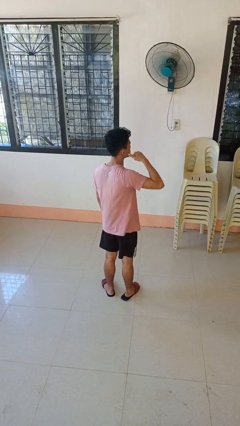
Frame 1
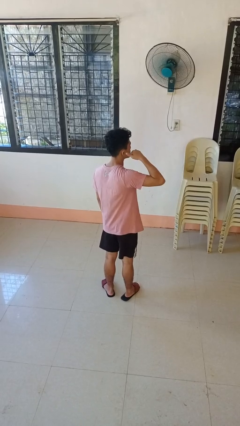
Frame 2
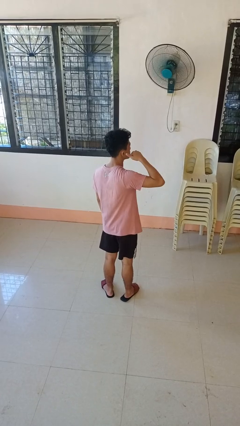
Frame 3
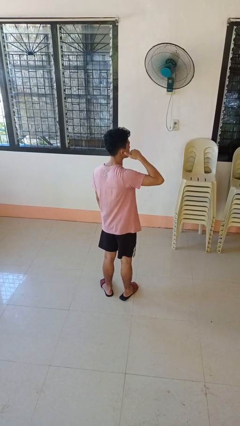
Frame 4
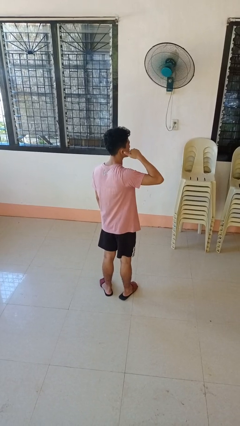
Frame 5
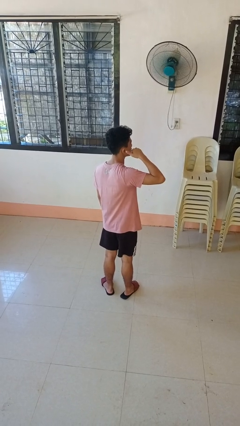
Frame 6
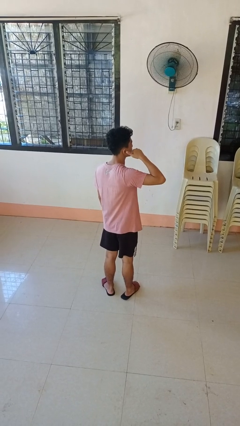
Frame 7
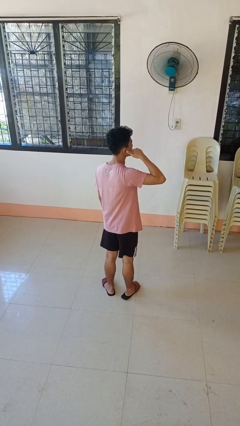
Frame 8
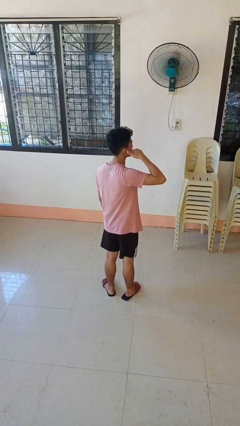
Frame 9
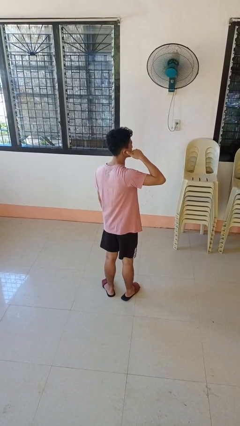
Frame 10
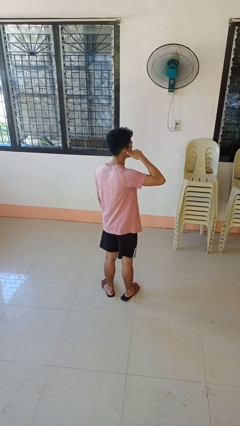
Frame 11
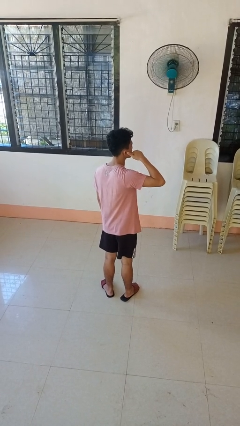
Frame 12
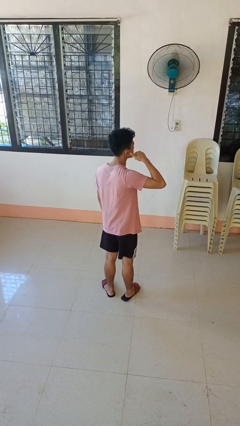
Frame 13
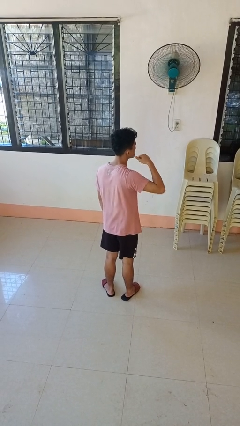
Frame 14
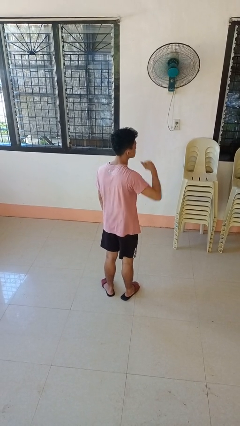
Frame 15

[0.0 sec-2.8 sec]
person gestures call me

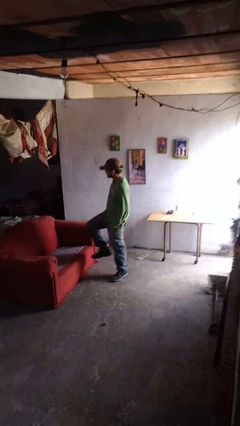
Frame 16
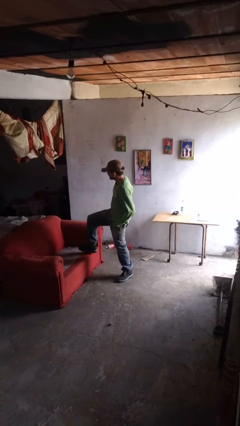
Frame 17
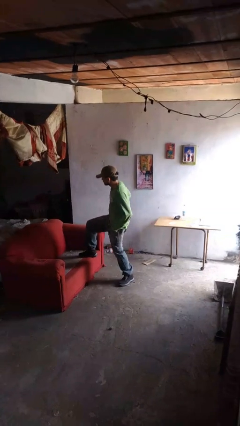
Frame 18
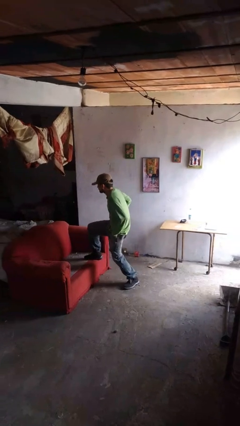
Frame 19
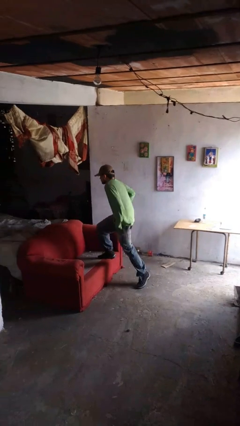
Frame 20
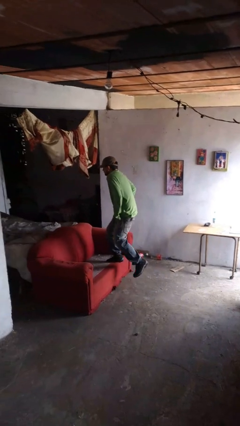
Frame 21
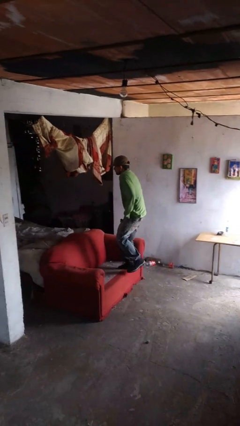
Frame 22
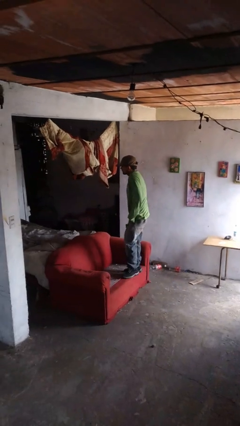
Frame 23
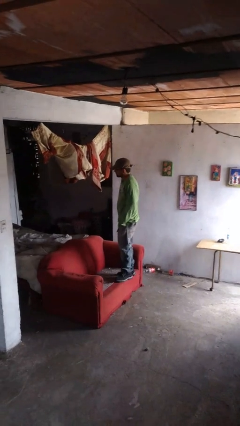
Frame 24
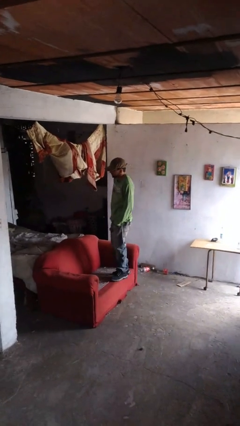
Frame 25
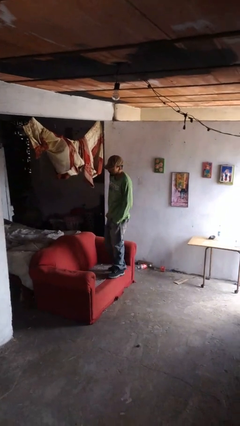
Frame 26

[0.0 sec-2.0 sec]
person climbs on couch

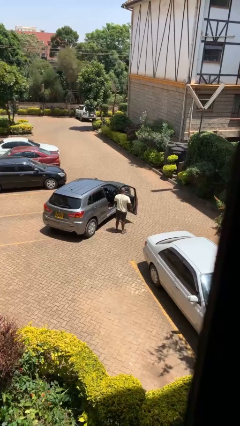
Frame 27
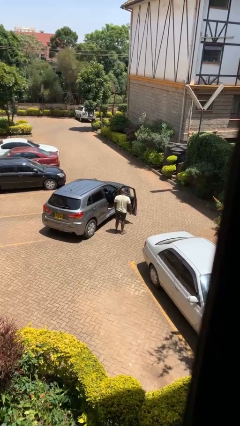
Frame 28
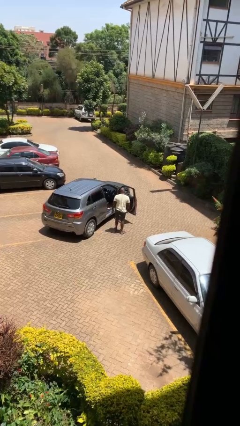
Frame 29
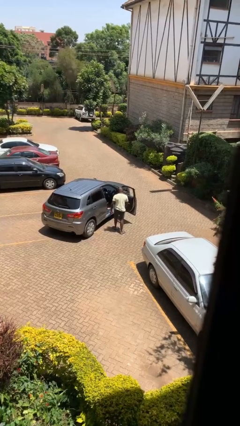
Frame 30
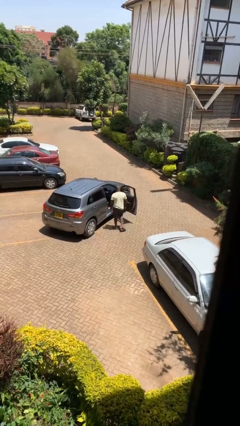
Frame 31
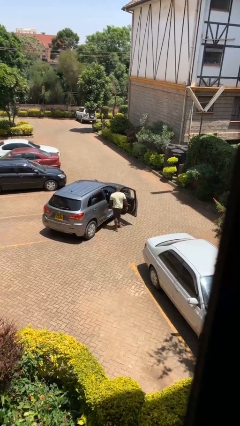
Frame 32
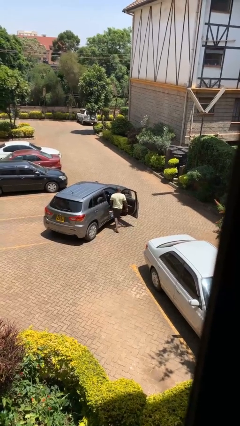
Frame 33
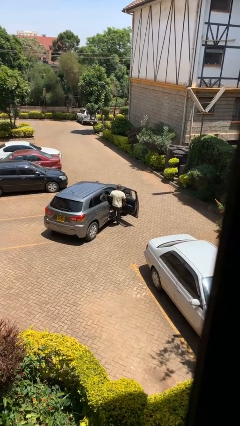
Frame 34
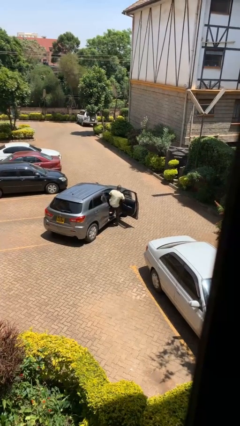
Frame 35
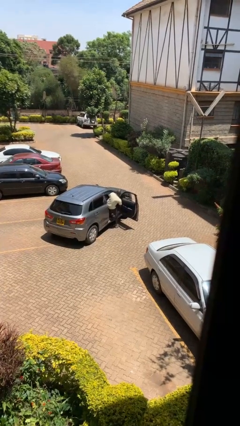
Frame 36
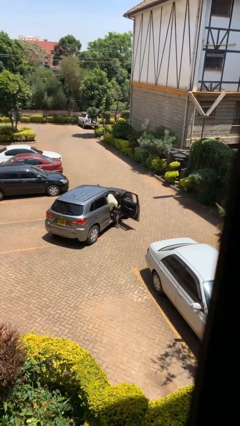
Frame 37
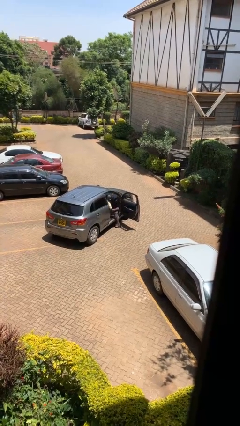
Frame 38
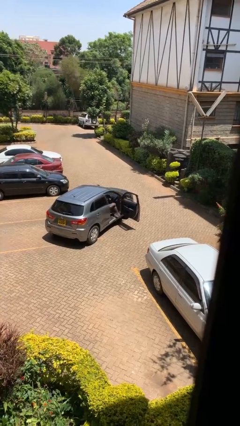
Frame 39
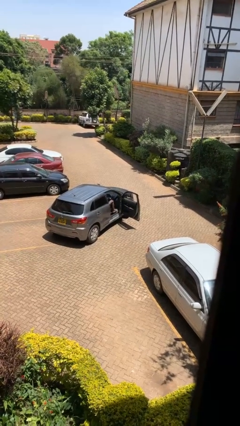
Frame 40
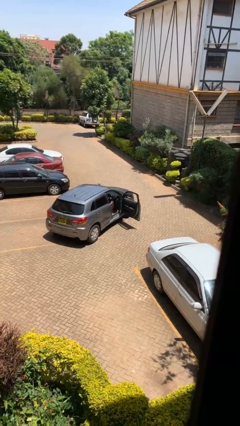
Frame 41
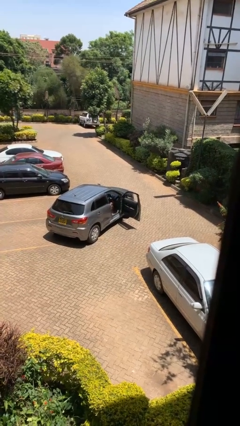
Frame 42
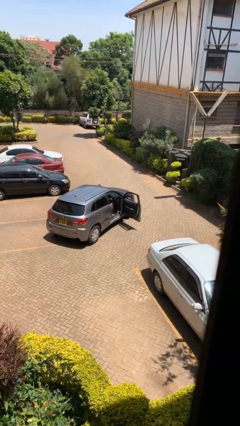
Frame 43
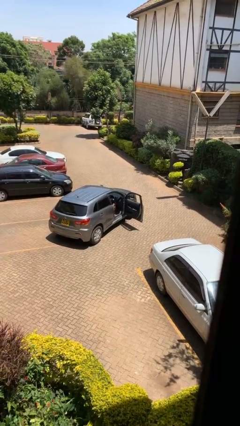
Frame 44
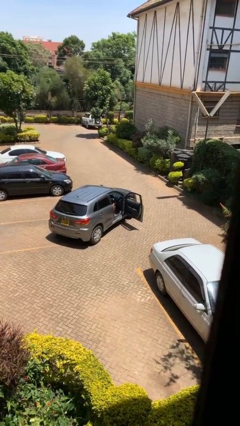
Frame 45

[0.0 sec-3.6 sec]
person enters car

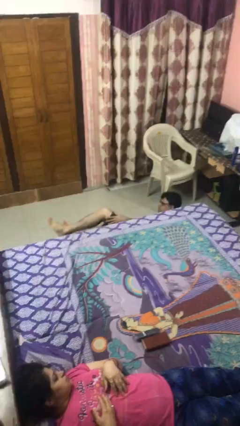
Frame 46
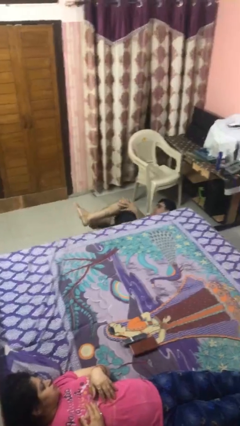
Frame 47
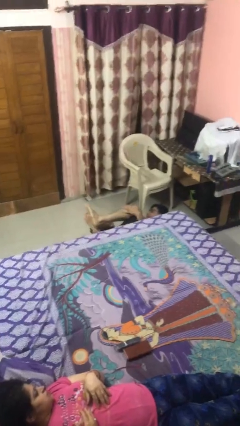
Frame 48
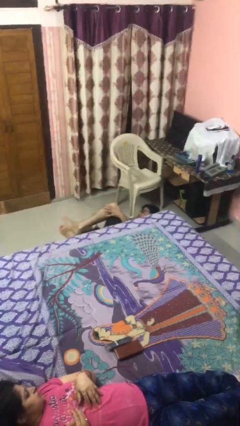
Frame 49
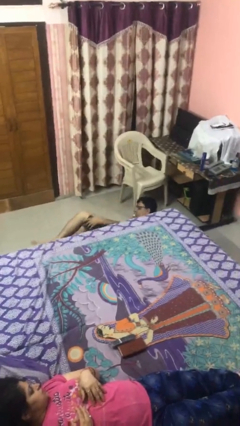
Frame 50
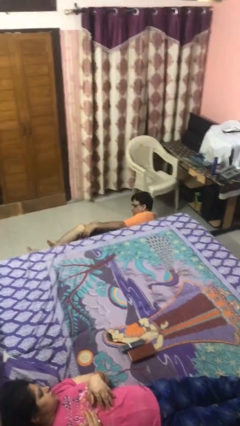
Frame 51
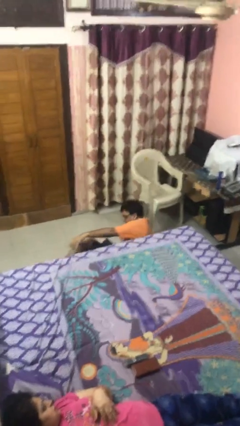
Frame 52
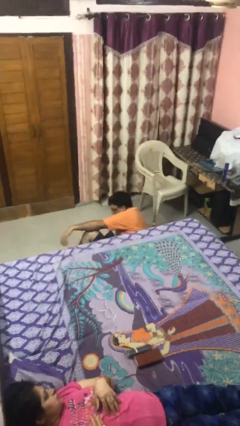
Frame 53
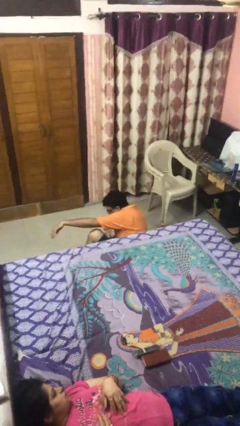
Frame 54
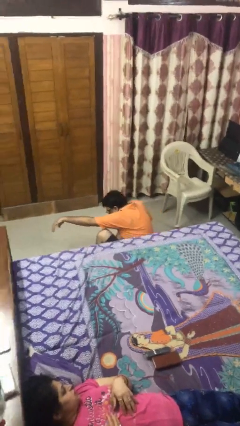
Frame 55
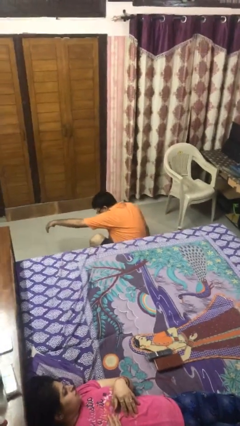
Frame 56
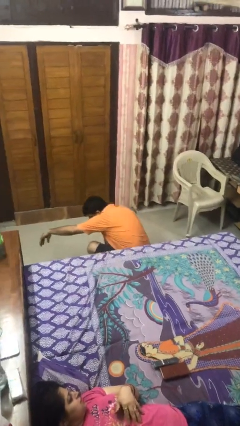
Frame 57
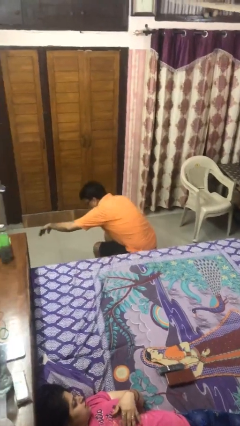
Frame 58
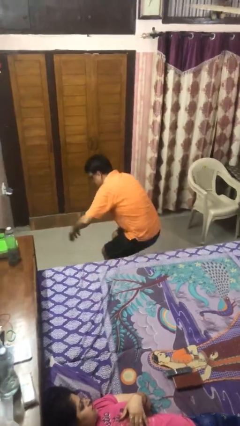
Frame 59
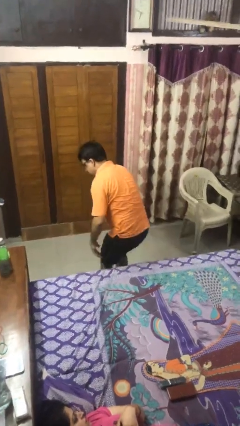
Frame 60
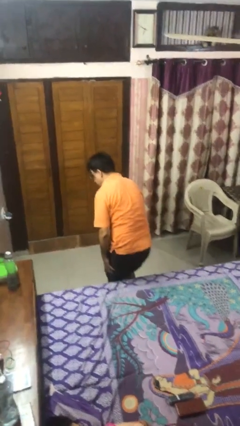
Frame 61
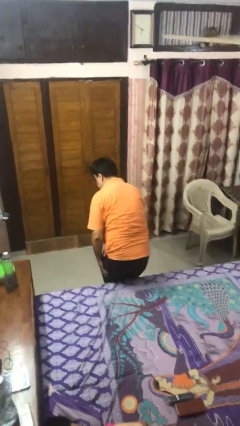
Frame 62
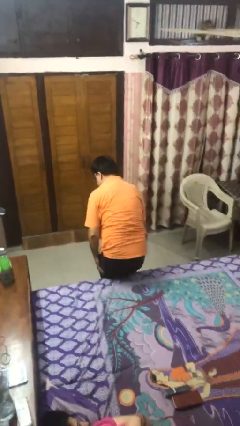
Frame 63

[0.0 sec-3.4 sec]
person stands up from floor

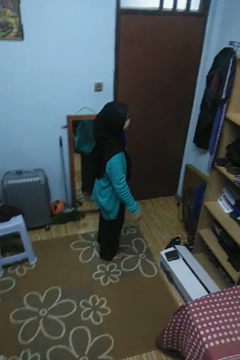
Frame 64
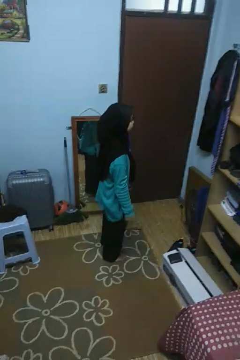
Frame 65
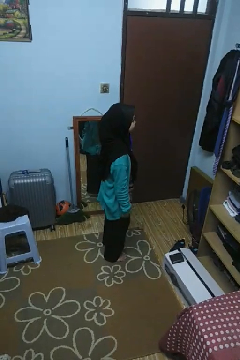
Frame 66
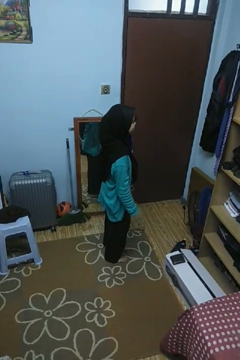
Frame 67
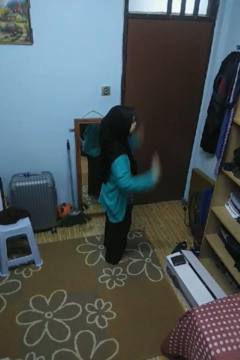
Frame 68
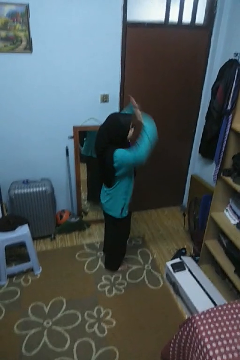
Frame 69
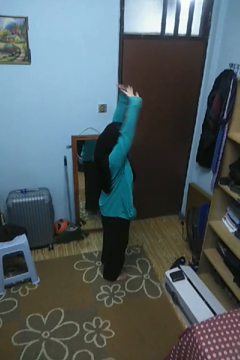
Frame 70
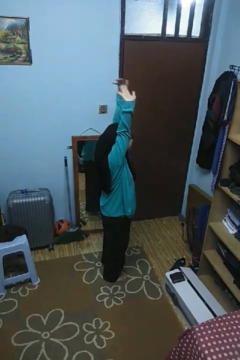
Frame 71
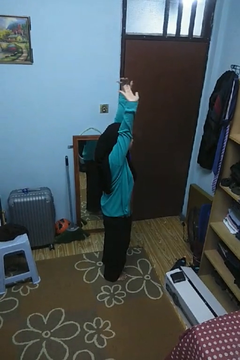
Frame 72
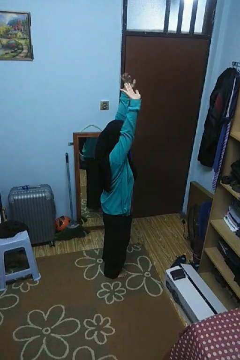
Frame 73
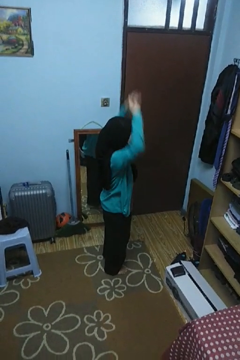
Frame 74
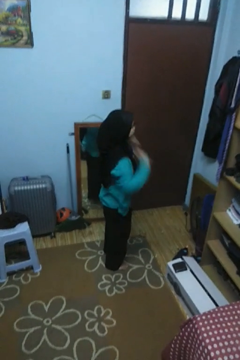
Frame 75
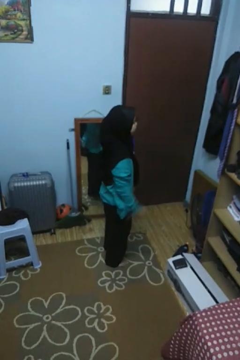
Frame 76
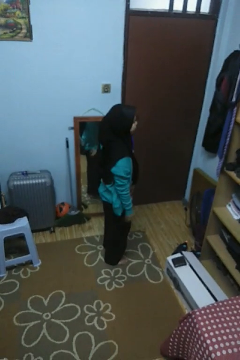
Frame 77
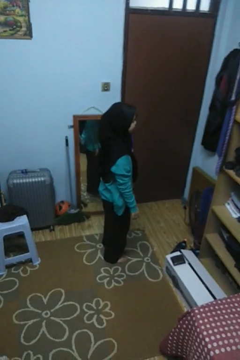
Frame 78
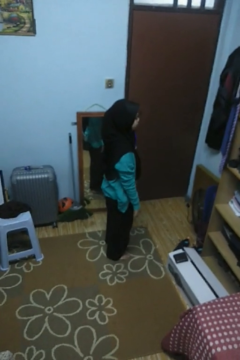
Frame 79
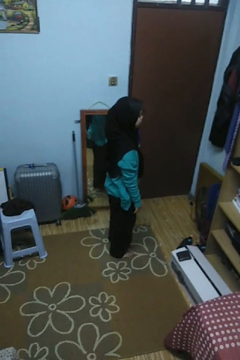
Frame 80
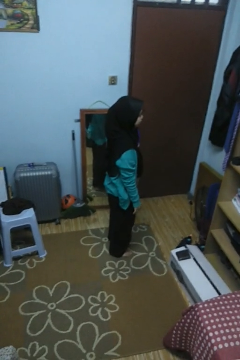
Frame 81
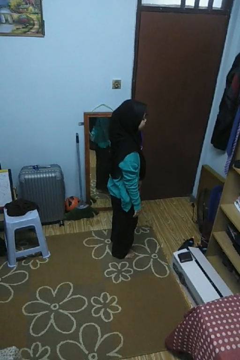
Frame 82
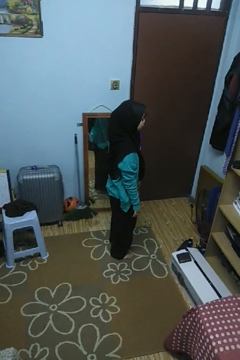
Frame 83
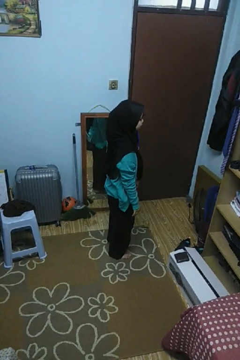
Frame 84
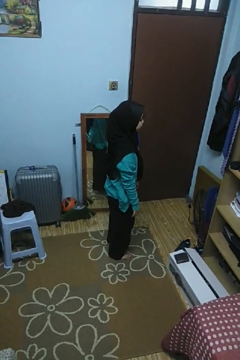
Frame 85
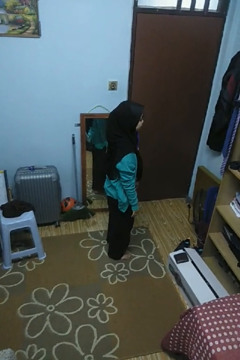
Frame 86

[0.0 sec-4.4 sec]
person stretches arms over head

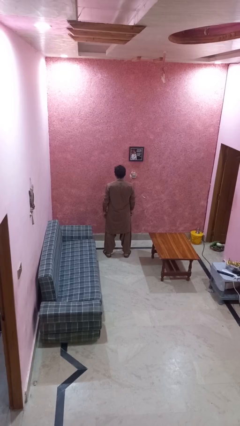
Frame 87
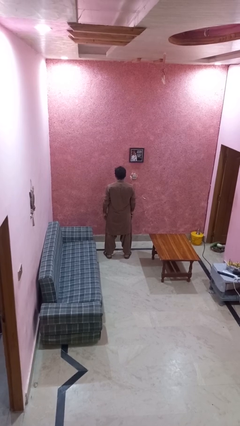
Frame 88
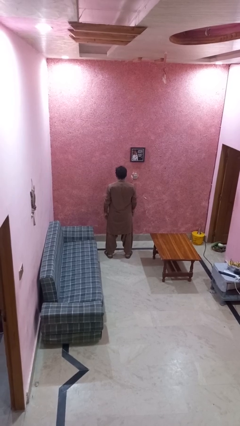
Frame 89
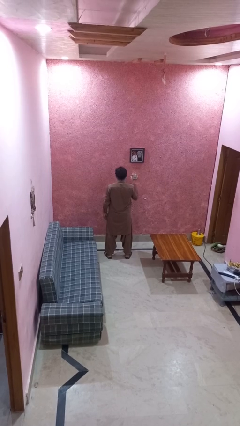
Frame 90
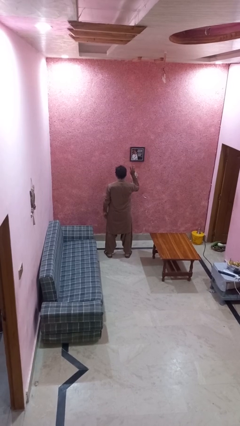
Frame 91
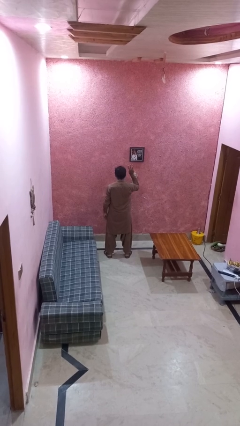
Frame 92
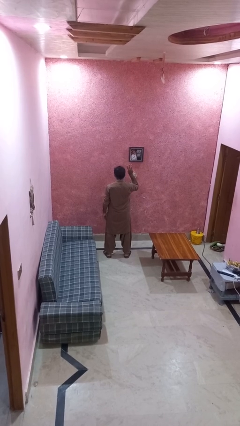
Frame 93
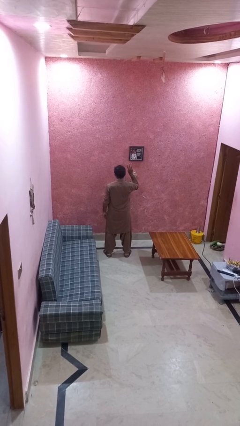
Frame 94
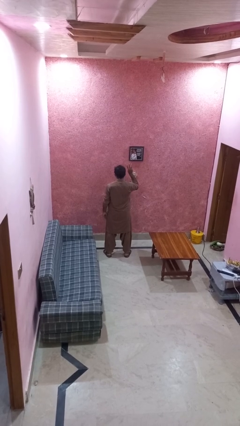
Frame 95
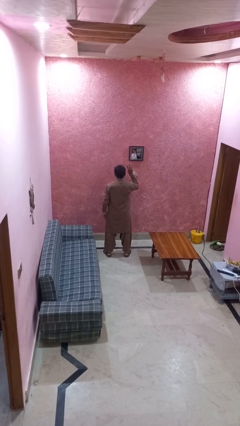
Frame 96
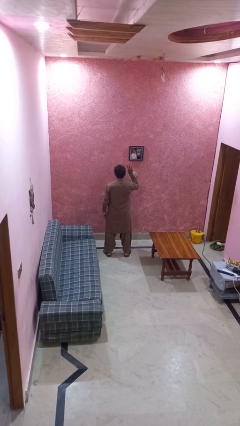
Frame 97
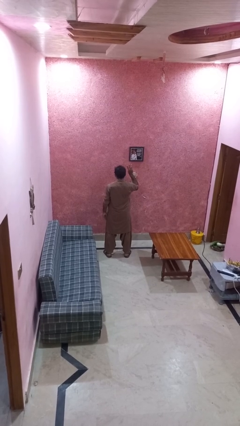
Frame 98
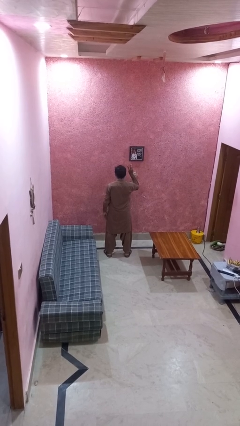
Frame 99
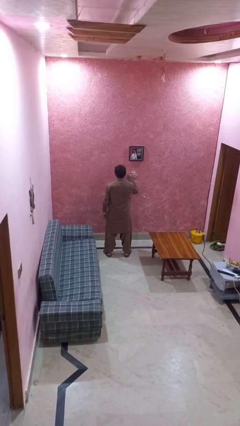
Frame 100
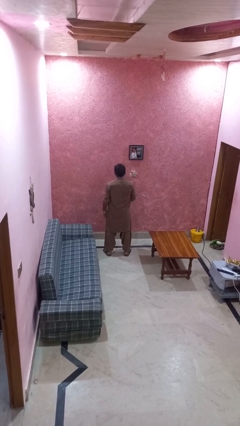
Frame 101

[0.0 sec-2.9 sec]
person gestures number three
